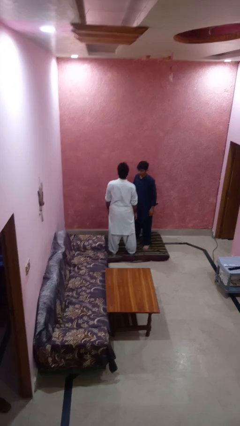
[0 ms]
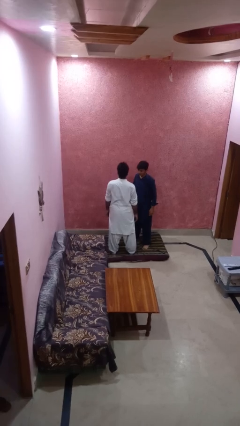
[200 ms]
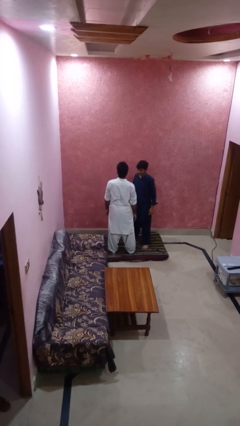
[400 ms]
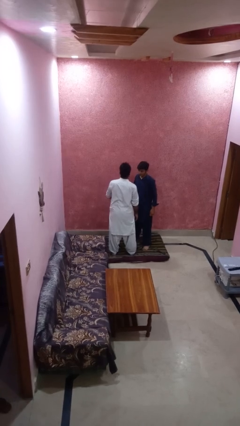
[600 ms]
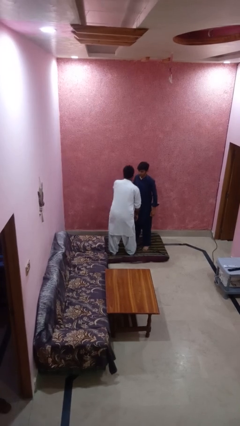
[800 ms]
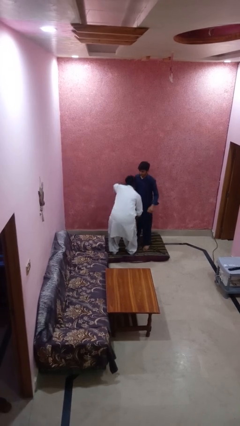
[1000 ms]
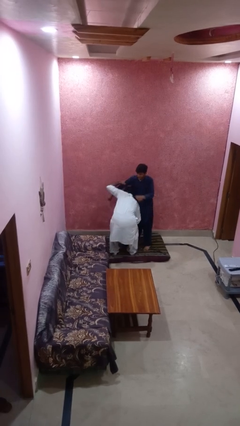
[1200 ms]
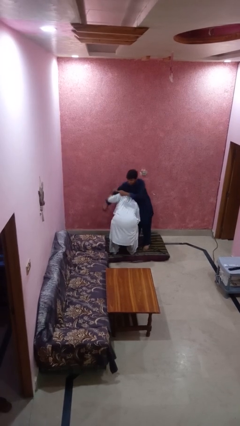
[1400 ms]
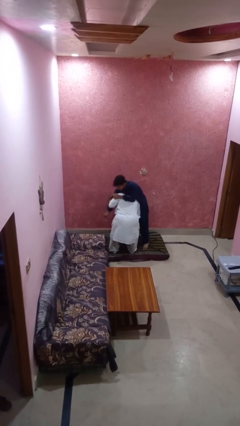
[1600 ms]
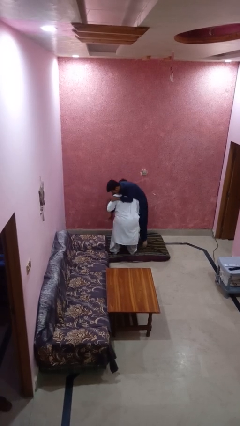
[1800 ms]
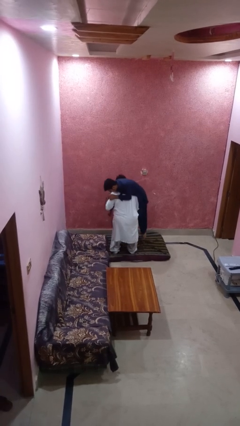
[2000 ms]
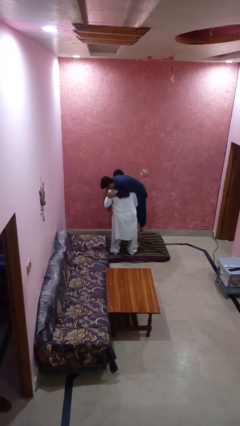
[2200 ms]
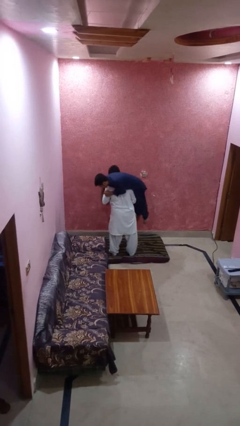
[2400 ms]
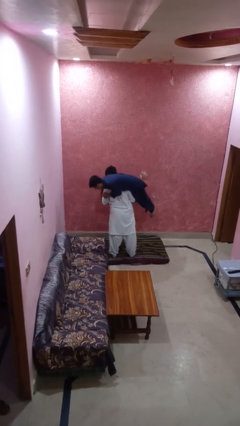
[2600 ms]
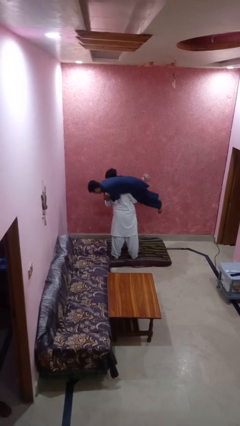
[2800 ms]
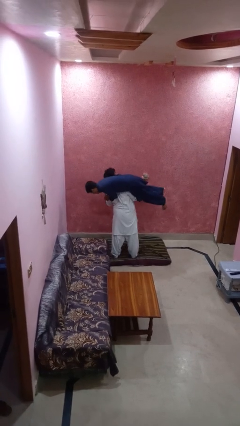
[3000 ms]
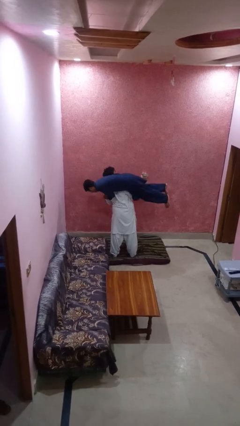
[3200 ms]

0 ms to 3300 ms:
person carries person over shoulder

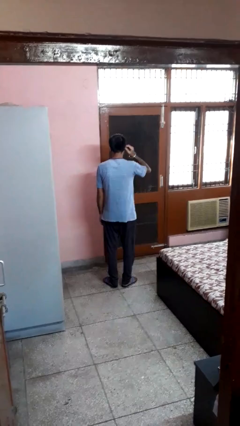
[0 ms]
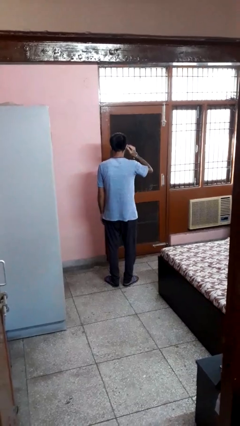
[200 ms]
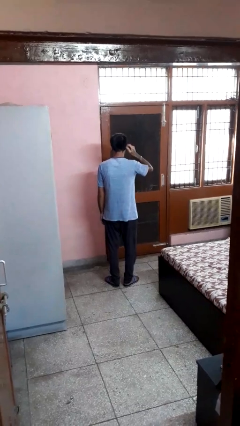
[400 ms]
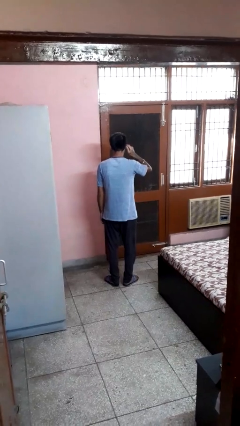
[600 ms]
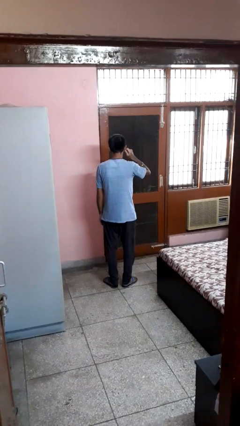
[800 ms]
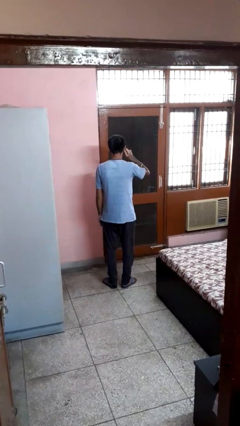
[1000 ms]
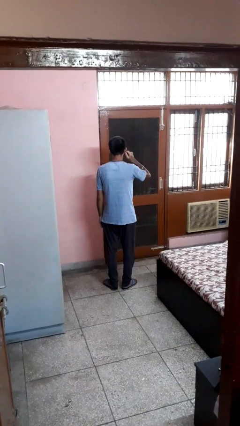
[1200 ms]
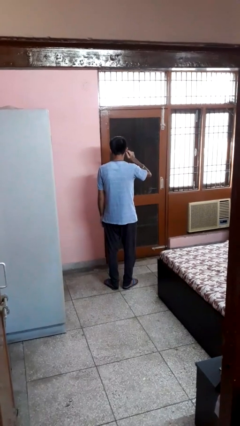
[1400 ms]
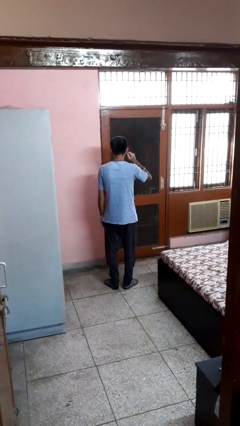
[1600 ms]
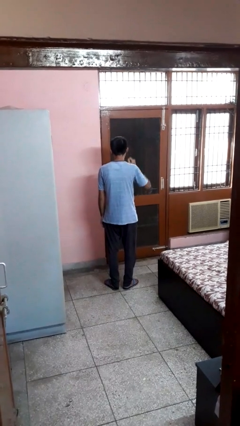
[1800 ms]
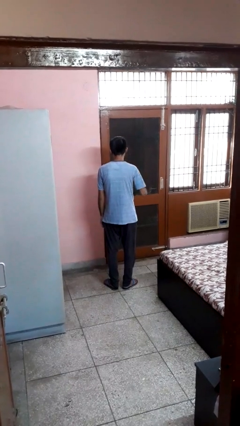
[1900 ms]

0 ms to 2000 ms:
person touches earlobe

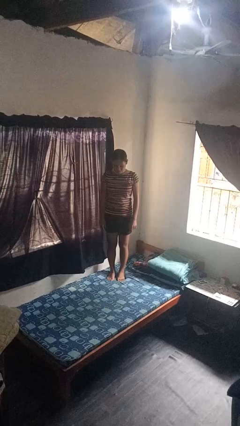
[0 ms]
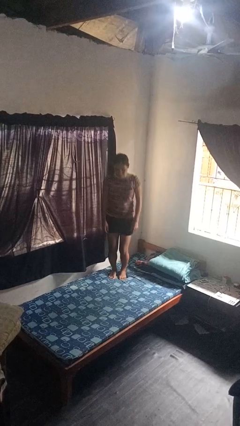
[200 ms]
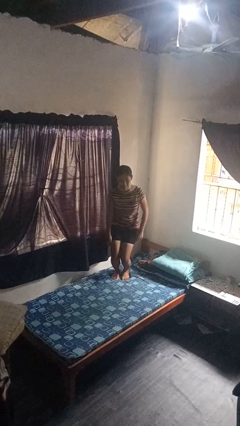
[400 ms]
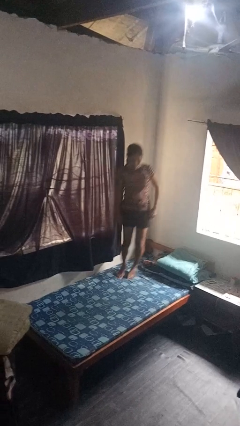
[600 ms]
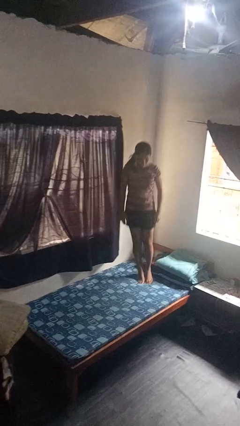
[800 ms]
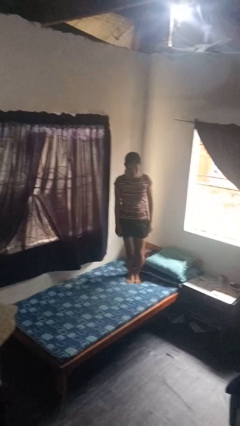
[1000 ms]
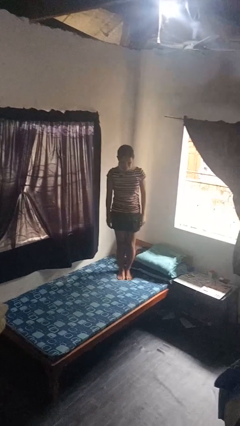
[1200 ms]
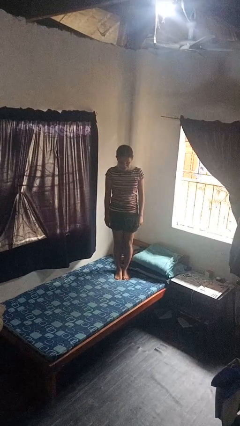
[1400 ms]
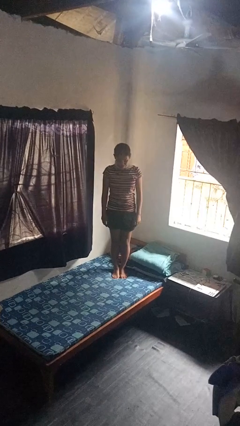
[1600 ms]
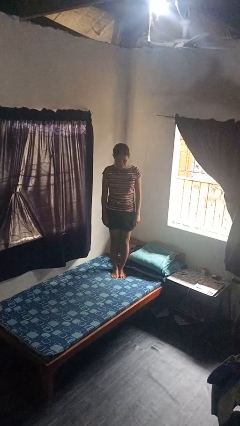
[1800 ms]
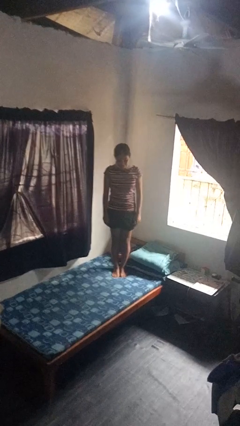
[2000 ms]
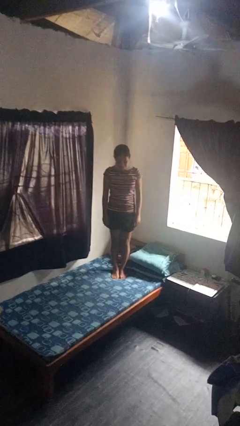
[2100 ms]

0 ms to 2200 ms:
person jumps on bed

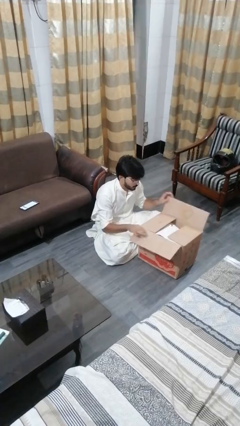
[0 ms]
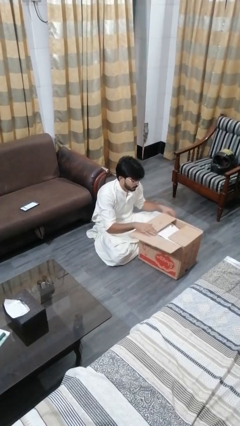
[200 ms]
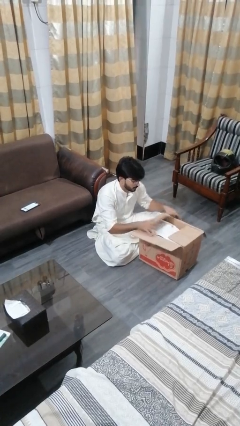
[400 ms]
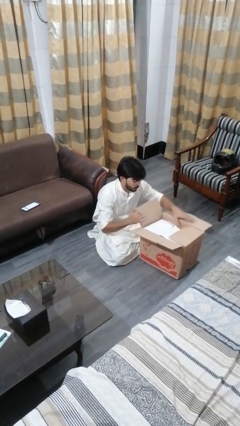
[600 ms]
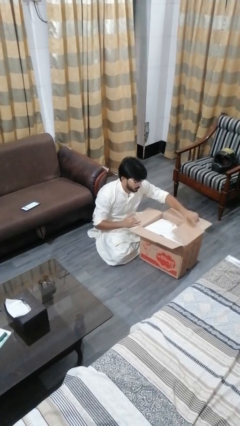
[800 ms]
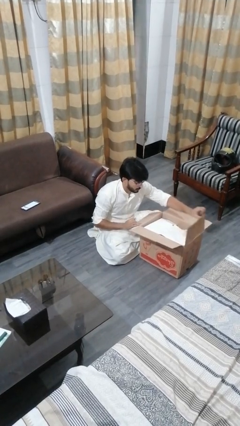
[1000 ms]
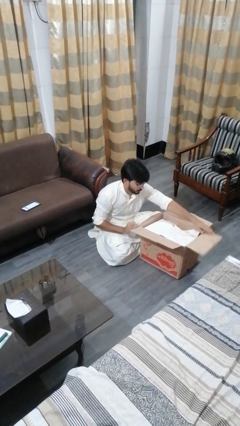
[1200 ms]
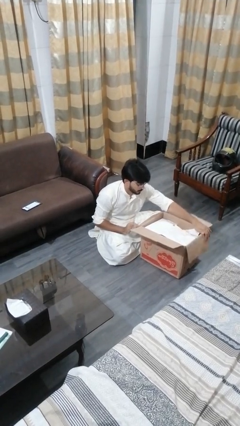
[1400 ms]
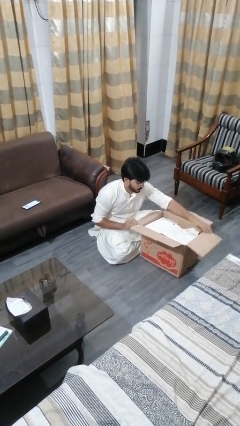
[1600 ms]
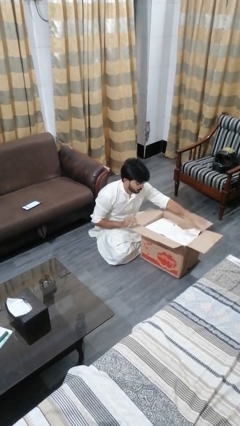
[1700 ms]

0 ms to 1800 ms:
person opens box

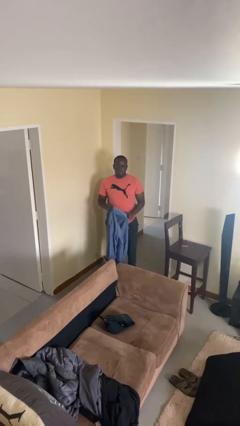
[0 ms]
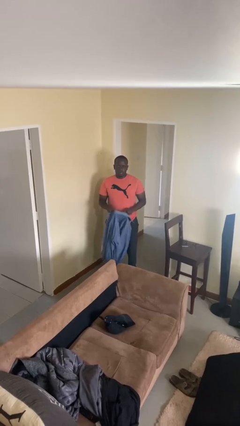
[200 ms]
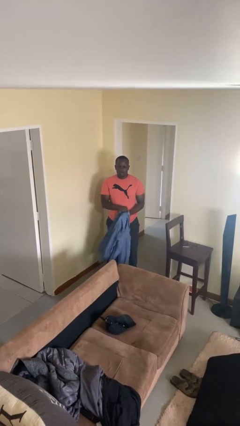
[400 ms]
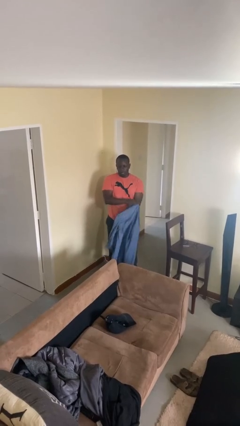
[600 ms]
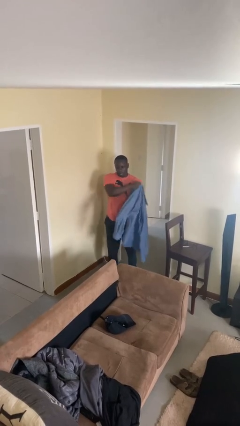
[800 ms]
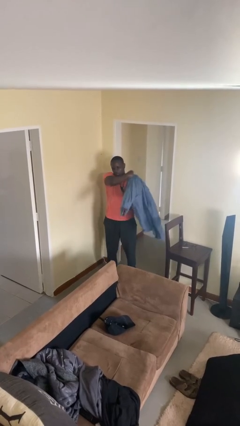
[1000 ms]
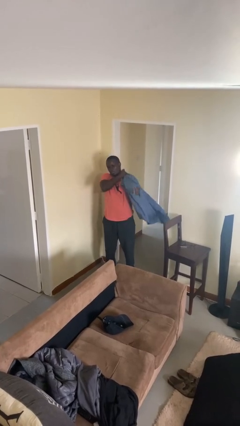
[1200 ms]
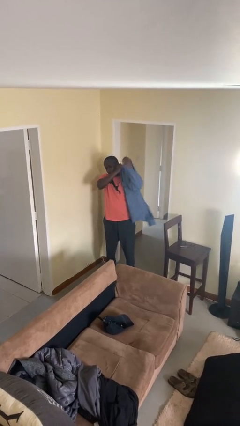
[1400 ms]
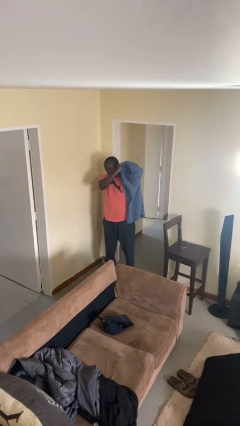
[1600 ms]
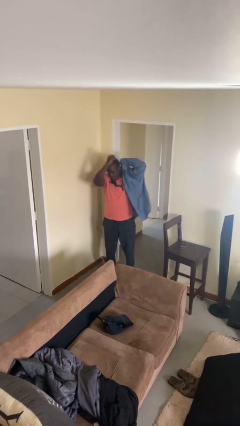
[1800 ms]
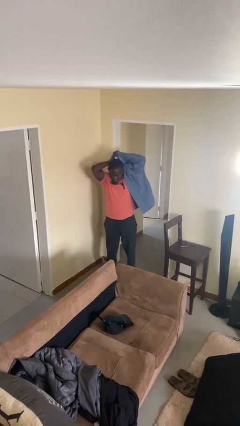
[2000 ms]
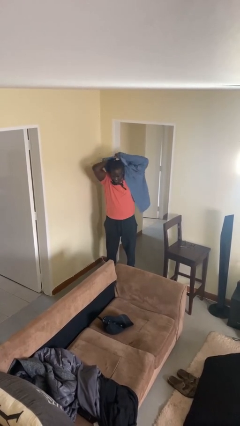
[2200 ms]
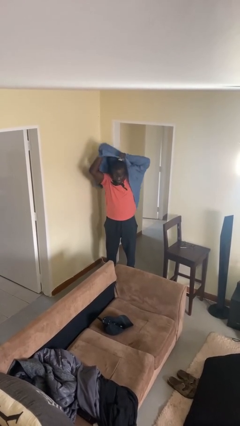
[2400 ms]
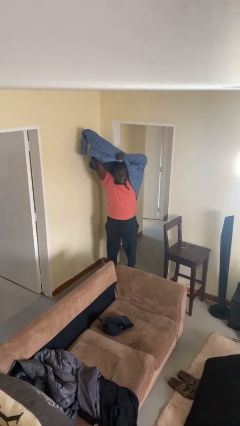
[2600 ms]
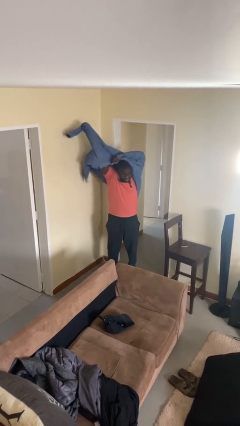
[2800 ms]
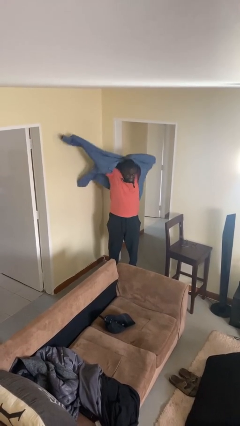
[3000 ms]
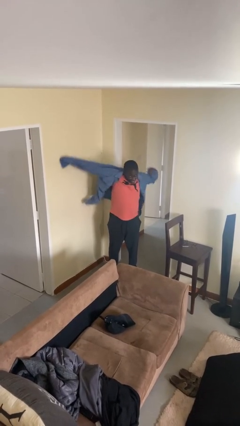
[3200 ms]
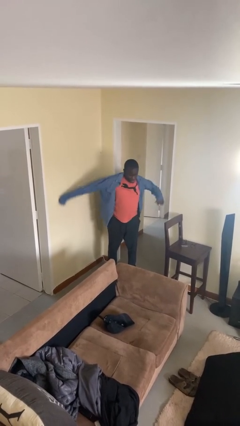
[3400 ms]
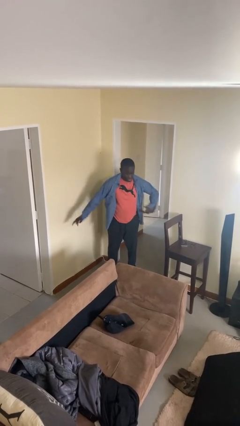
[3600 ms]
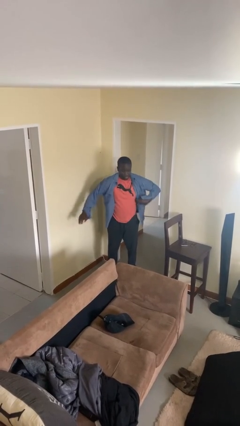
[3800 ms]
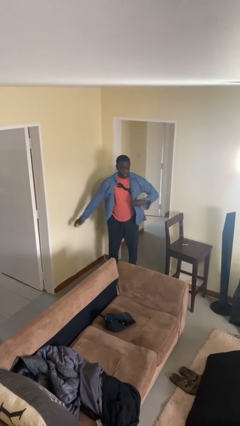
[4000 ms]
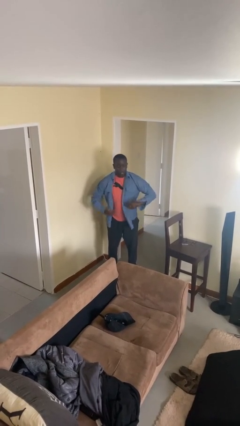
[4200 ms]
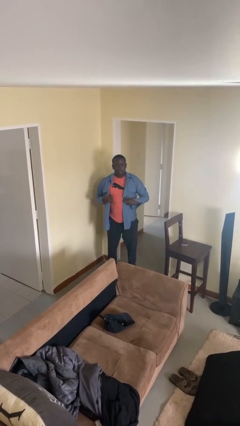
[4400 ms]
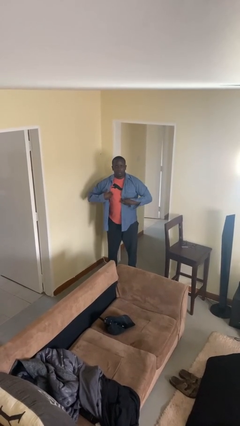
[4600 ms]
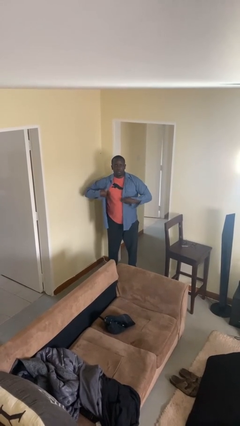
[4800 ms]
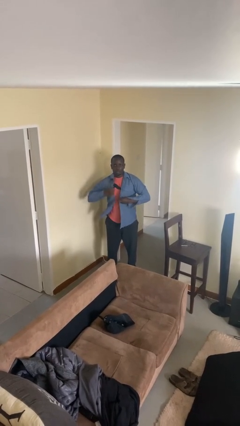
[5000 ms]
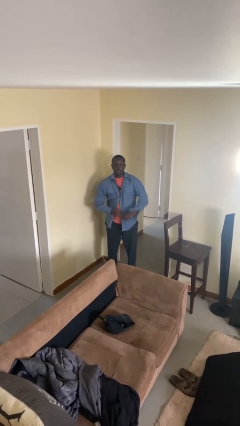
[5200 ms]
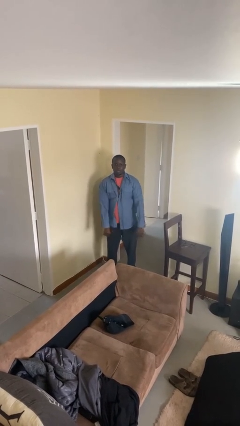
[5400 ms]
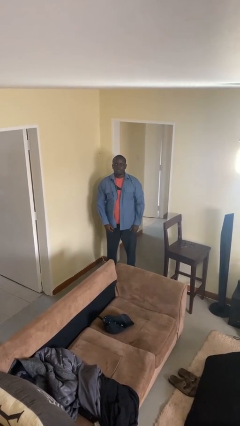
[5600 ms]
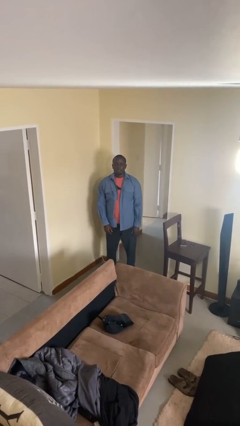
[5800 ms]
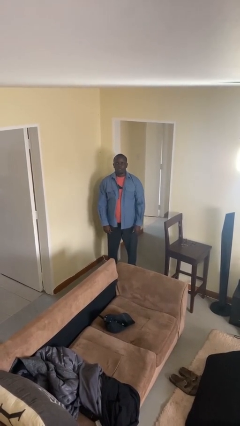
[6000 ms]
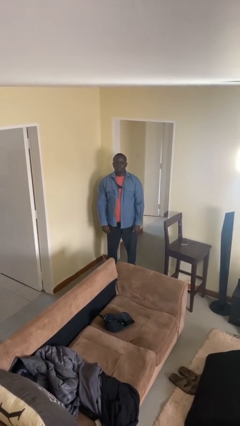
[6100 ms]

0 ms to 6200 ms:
person puts on shirt

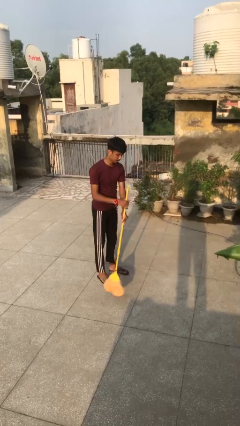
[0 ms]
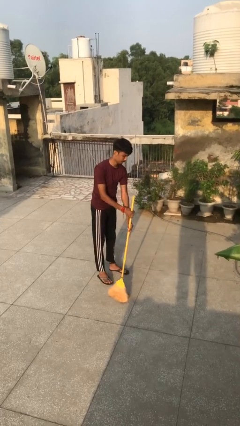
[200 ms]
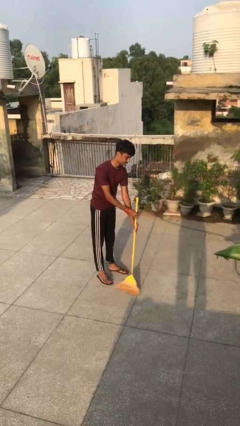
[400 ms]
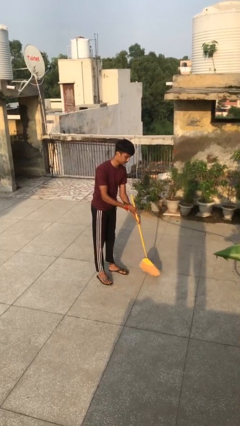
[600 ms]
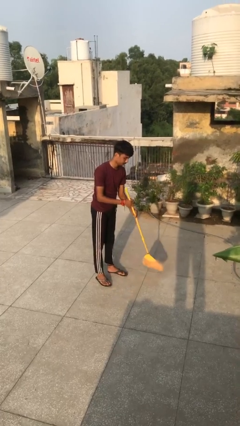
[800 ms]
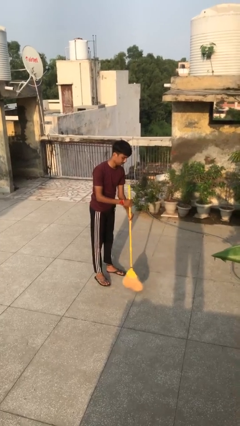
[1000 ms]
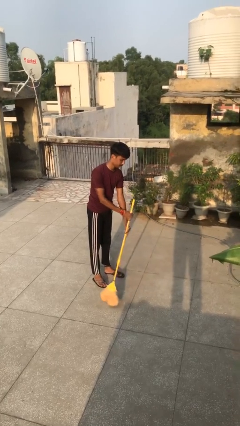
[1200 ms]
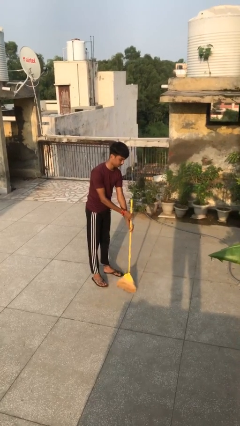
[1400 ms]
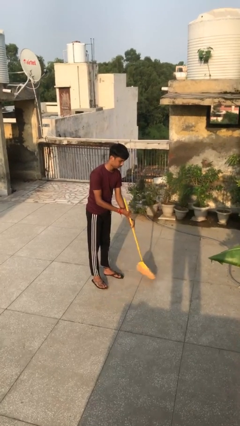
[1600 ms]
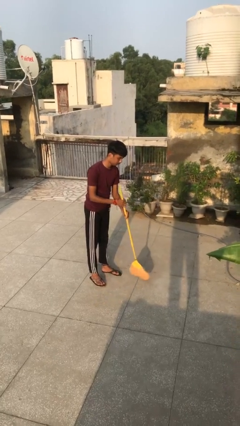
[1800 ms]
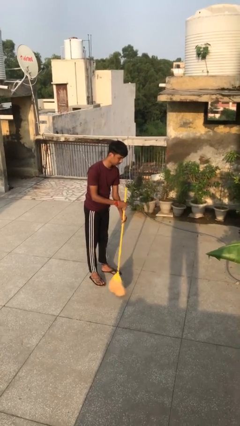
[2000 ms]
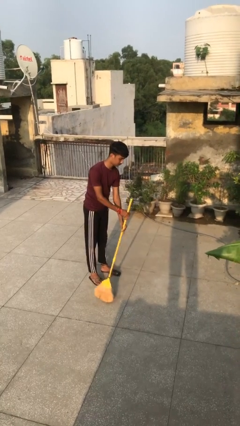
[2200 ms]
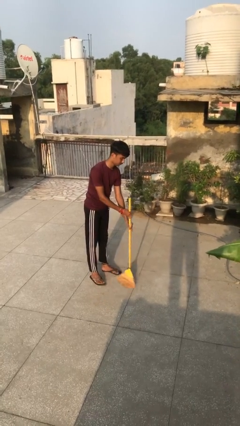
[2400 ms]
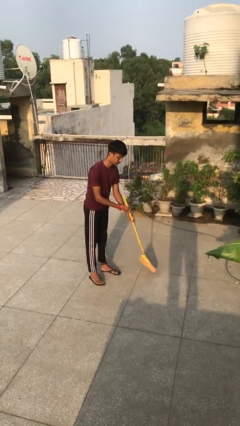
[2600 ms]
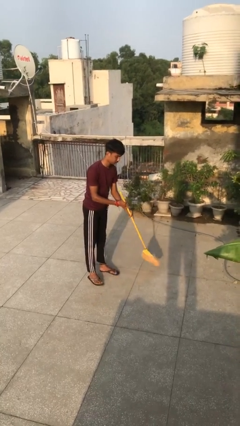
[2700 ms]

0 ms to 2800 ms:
person sweeps floor
